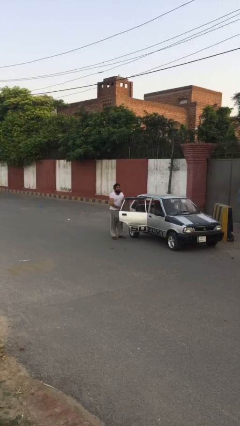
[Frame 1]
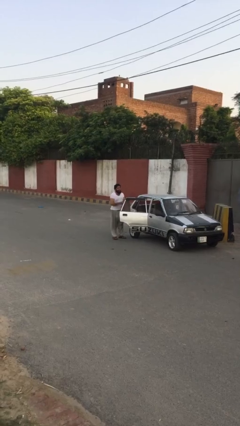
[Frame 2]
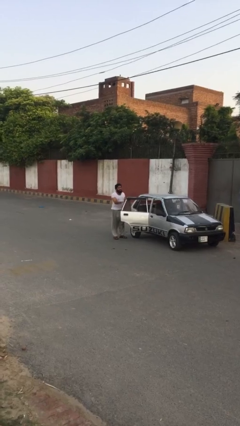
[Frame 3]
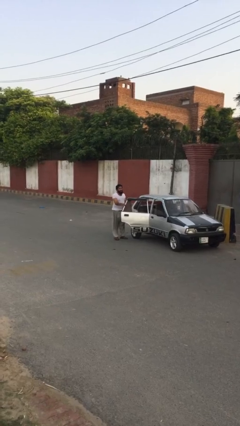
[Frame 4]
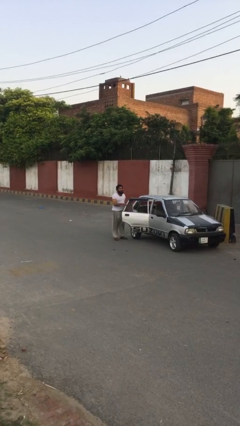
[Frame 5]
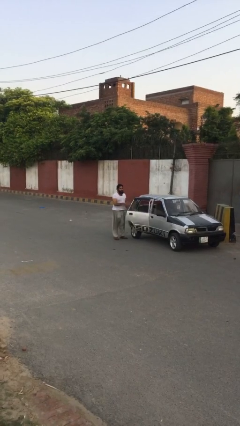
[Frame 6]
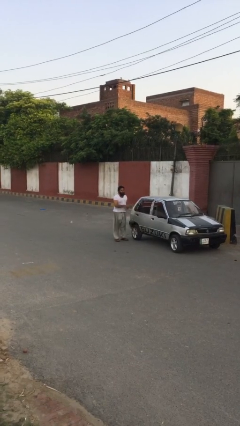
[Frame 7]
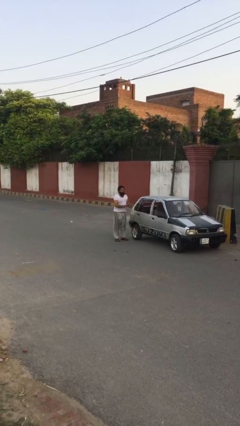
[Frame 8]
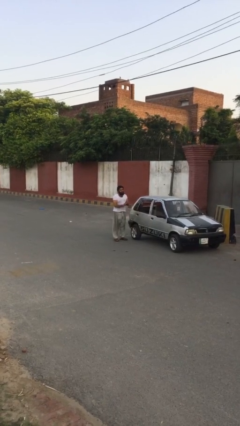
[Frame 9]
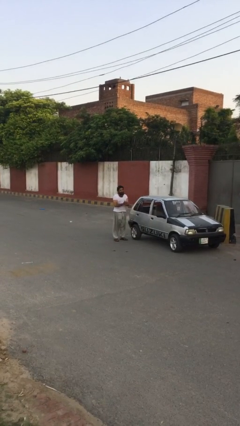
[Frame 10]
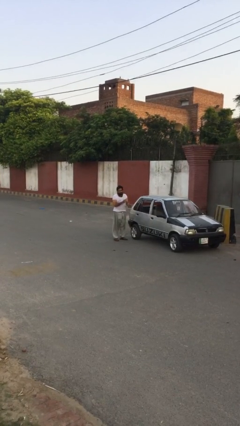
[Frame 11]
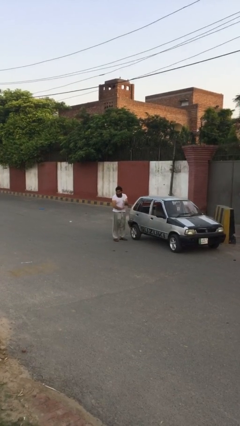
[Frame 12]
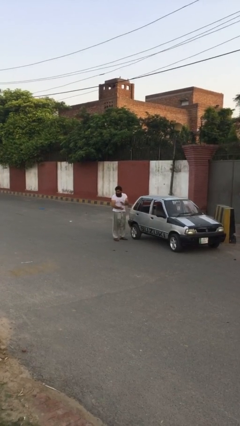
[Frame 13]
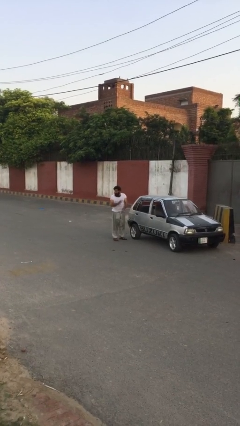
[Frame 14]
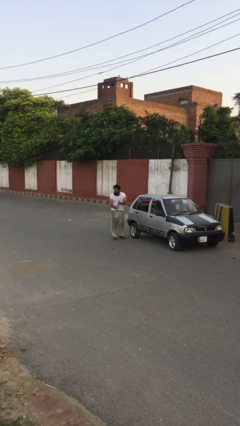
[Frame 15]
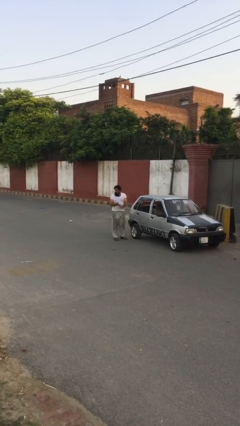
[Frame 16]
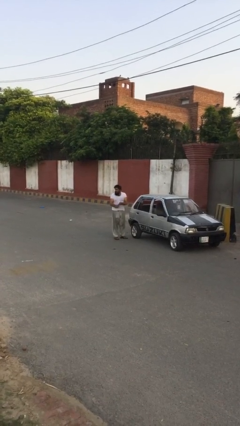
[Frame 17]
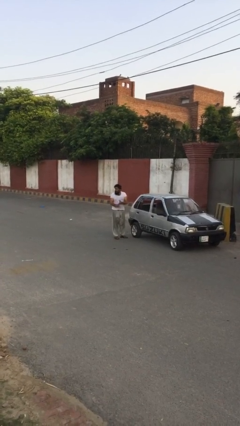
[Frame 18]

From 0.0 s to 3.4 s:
person closes car door

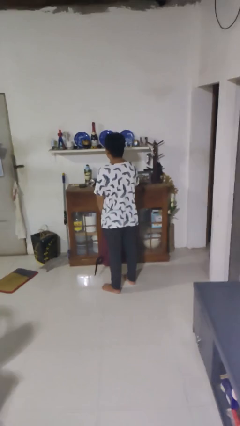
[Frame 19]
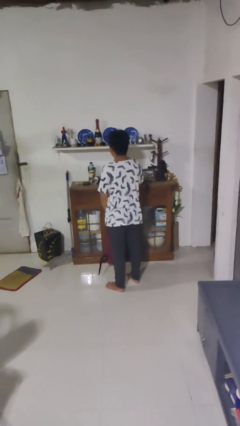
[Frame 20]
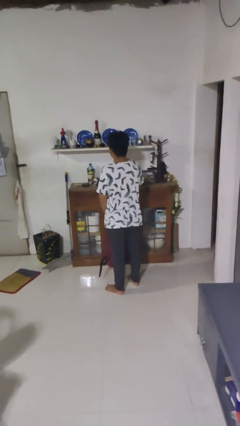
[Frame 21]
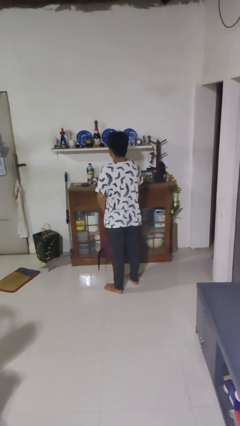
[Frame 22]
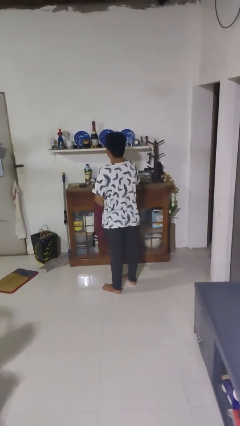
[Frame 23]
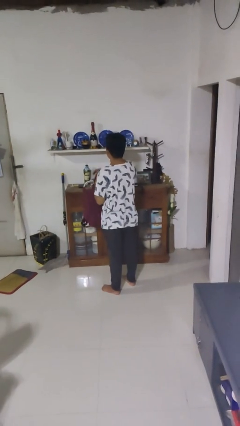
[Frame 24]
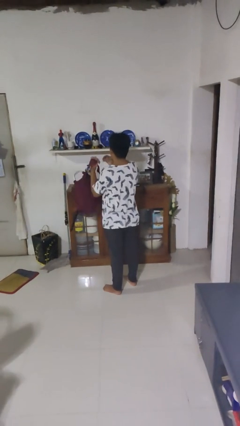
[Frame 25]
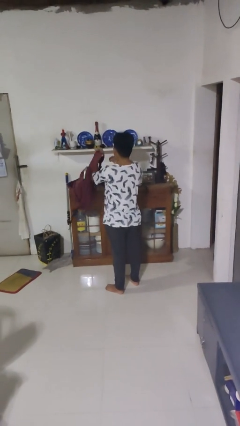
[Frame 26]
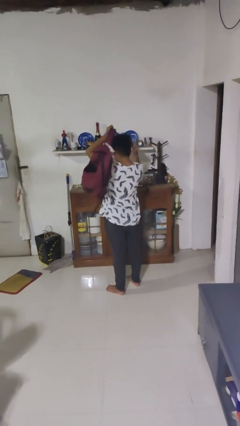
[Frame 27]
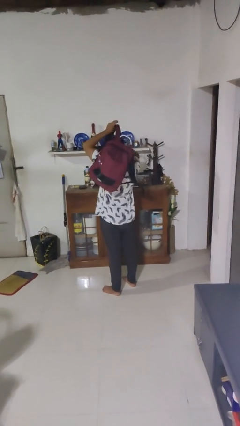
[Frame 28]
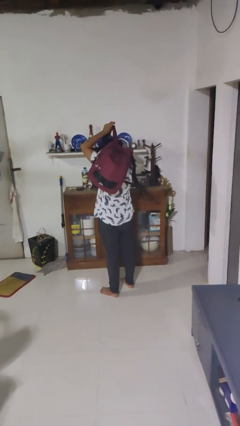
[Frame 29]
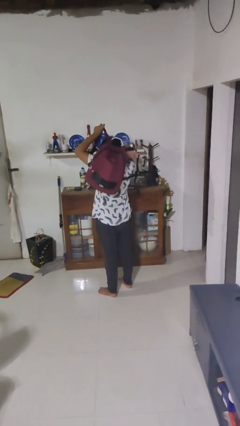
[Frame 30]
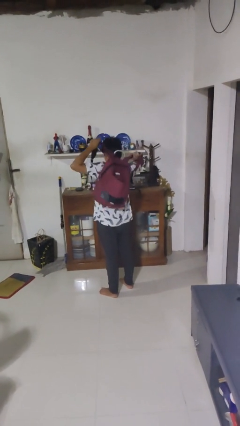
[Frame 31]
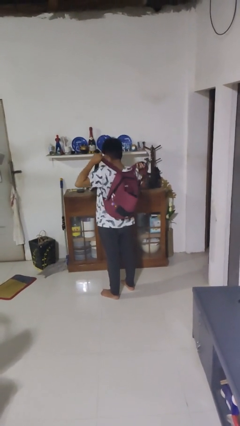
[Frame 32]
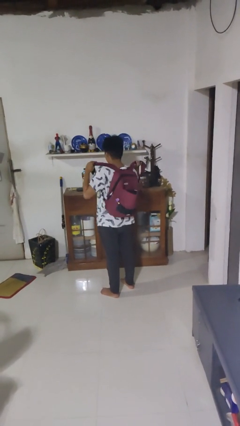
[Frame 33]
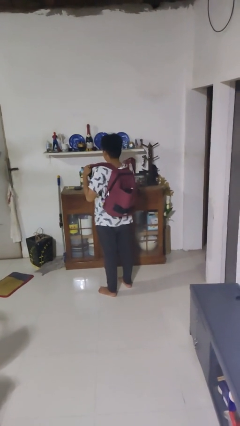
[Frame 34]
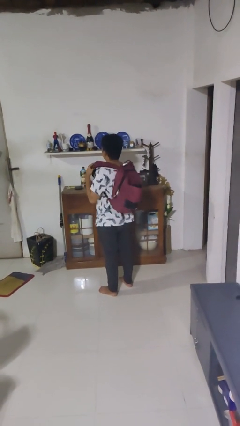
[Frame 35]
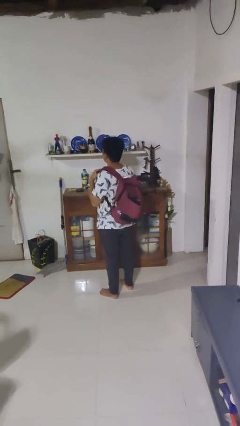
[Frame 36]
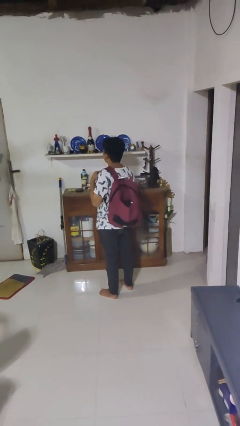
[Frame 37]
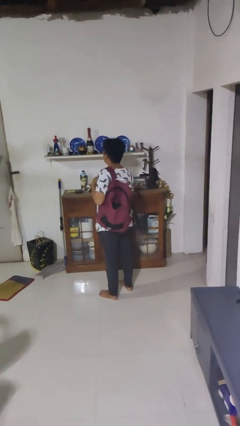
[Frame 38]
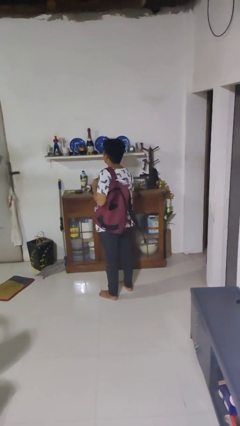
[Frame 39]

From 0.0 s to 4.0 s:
person puts on backpack

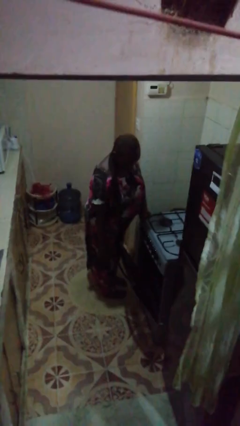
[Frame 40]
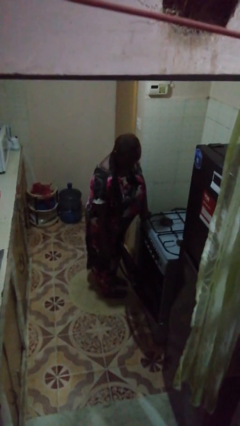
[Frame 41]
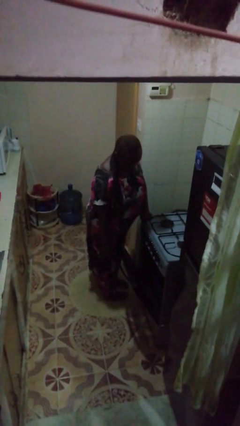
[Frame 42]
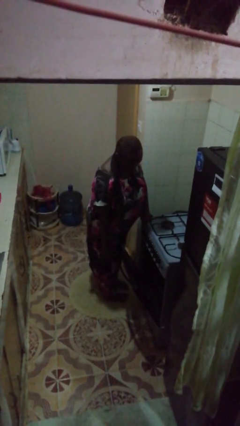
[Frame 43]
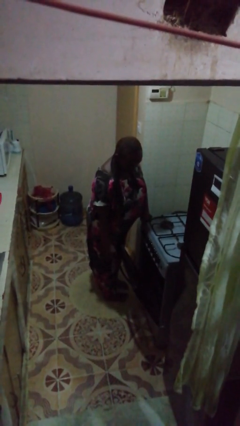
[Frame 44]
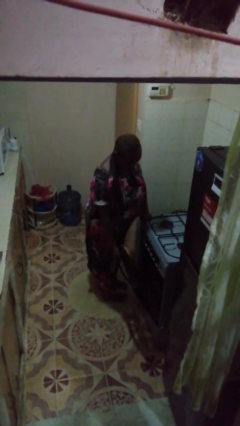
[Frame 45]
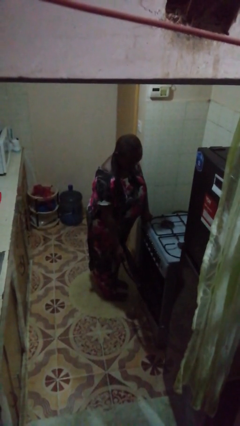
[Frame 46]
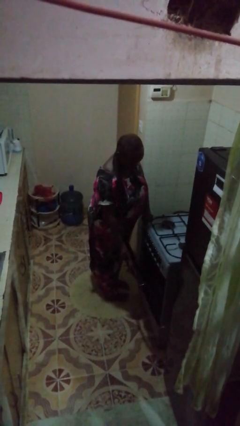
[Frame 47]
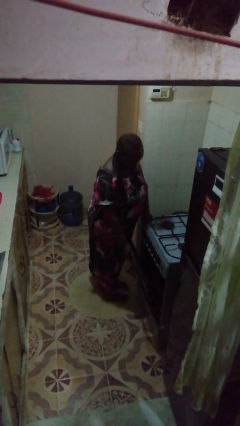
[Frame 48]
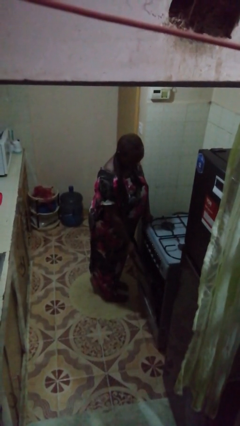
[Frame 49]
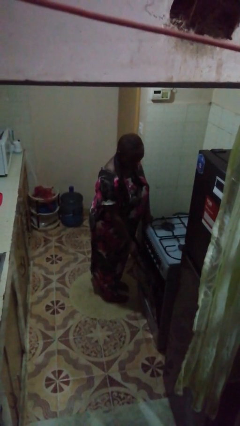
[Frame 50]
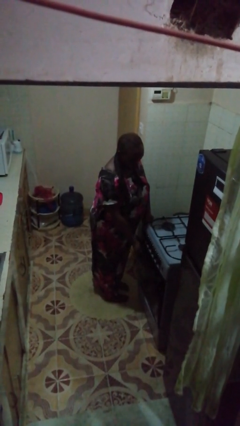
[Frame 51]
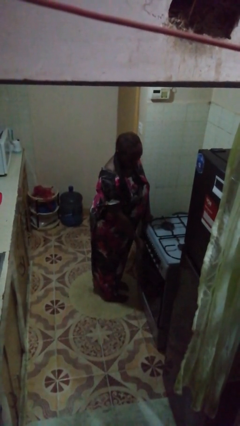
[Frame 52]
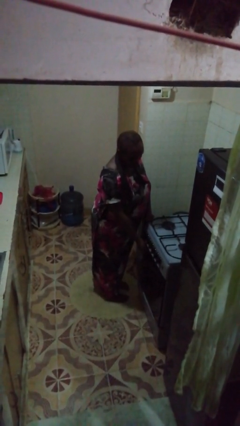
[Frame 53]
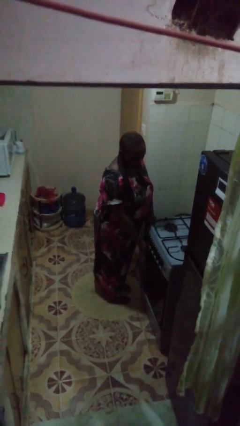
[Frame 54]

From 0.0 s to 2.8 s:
person closes oven door

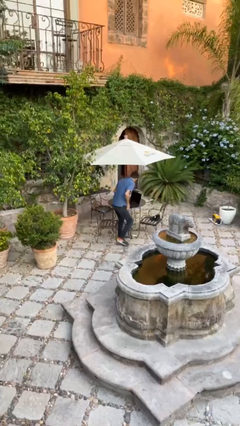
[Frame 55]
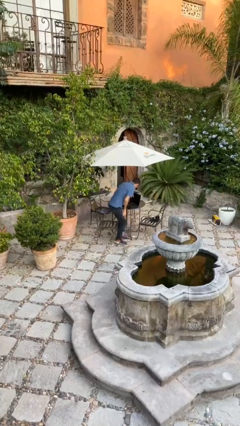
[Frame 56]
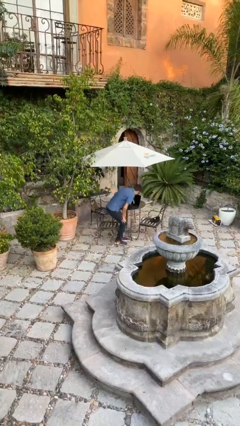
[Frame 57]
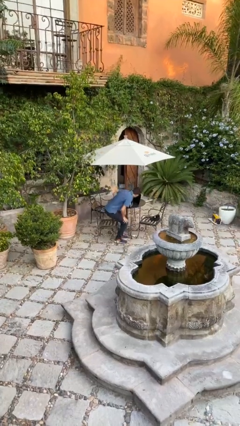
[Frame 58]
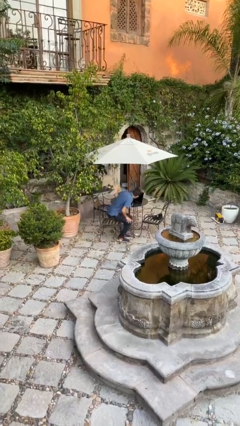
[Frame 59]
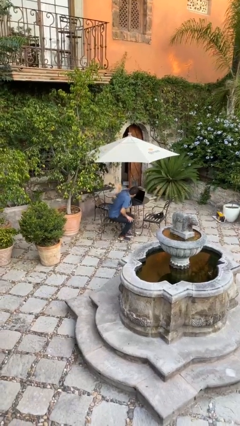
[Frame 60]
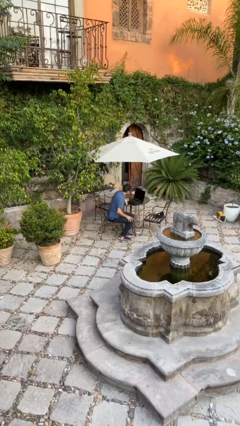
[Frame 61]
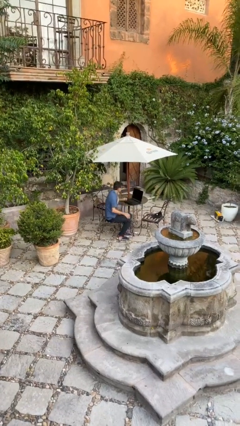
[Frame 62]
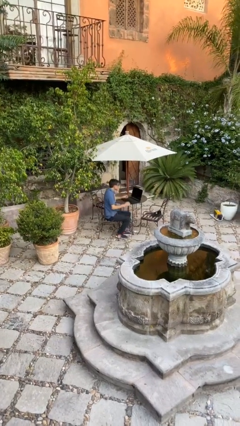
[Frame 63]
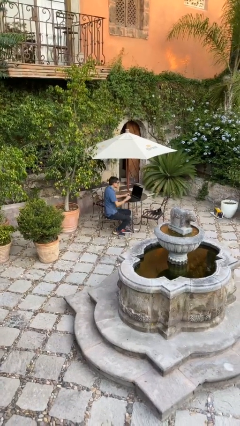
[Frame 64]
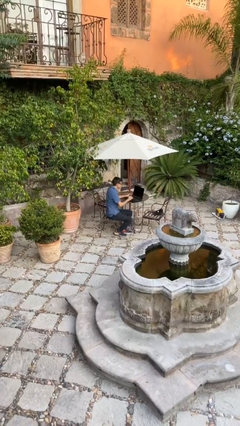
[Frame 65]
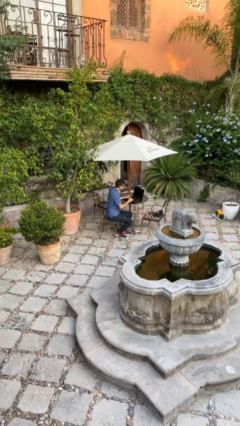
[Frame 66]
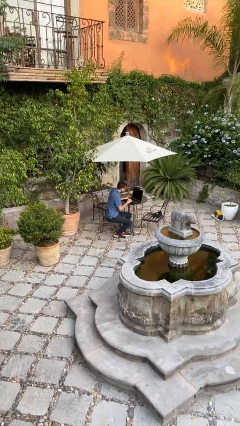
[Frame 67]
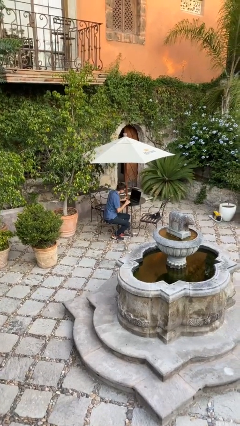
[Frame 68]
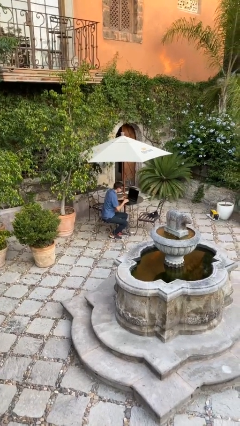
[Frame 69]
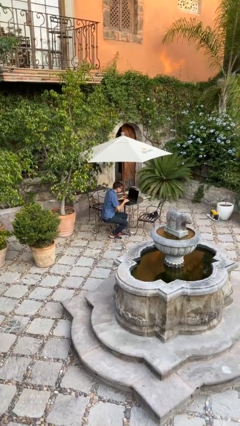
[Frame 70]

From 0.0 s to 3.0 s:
person sits down

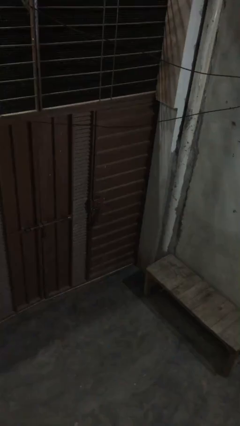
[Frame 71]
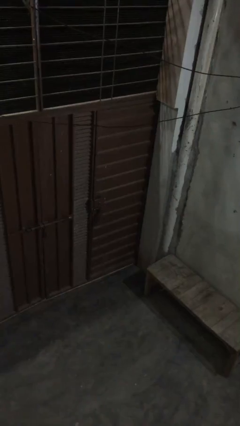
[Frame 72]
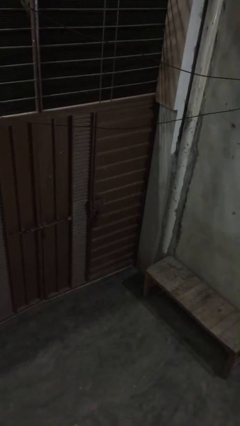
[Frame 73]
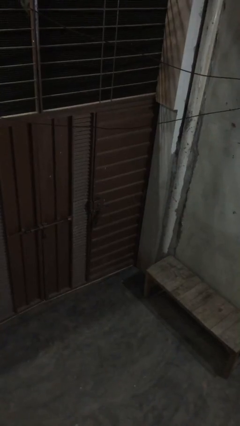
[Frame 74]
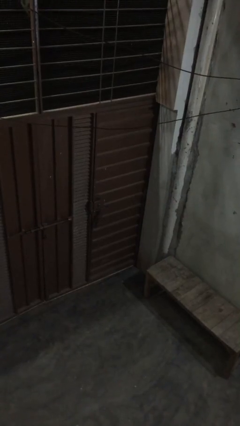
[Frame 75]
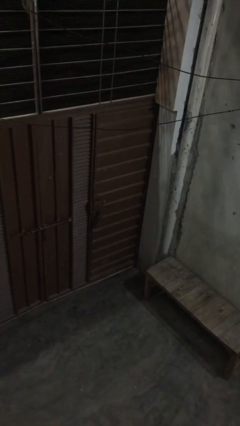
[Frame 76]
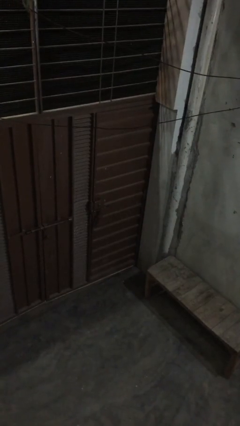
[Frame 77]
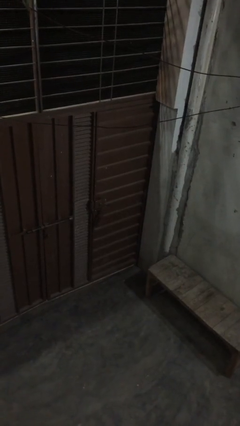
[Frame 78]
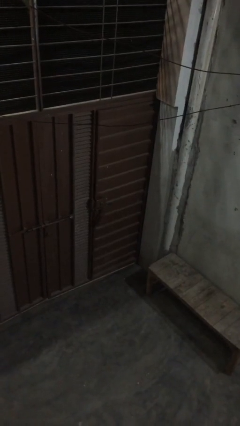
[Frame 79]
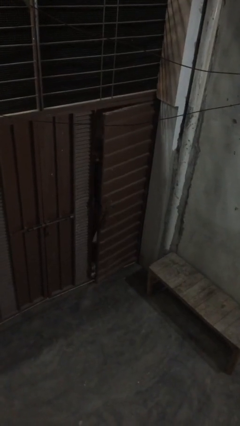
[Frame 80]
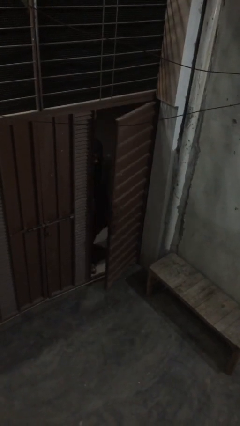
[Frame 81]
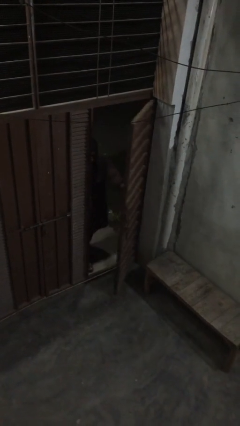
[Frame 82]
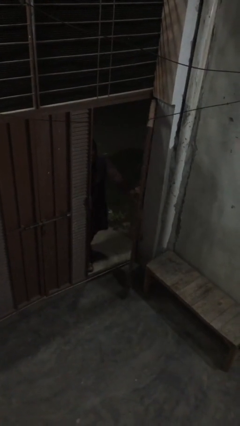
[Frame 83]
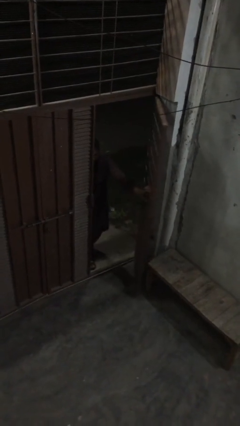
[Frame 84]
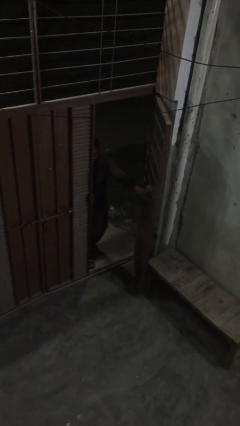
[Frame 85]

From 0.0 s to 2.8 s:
person opens facility door

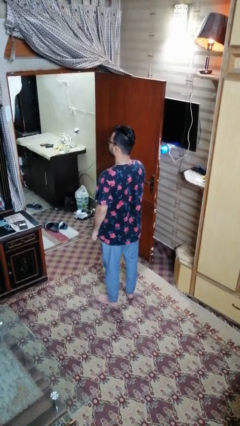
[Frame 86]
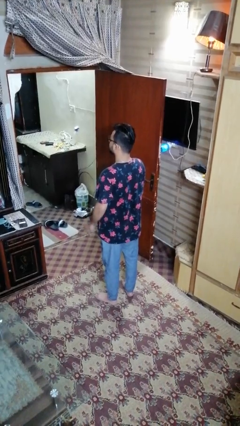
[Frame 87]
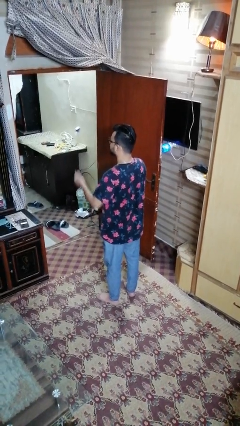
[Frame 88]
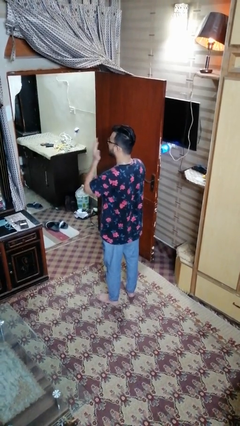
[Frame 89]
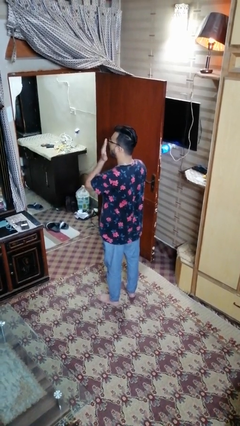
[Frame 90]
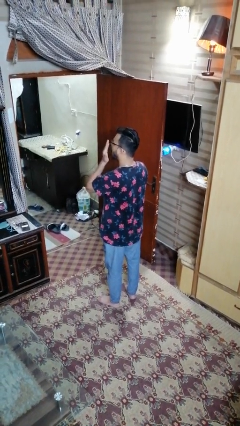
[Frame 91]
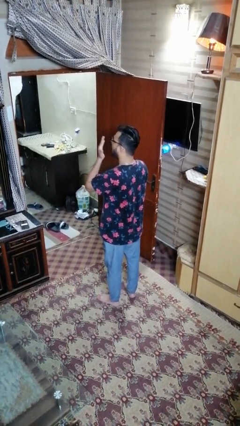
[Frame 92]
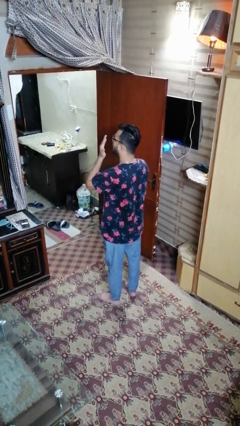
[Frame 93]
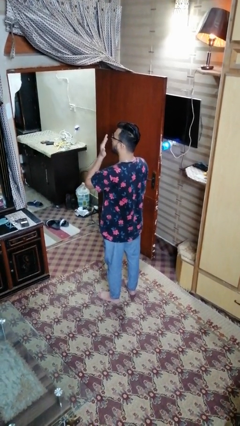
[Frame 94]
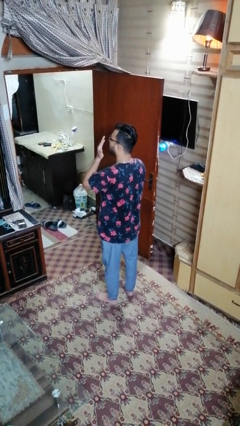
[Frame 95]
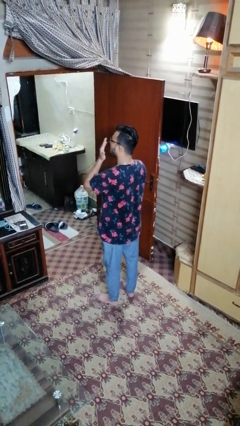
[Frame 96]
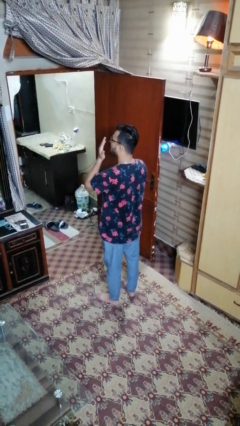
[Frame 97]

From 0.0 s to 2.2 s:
person yawns
